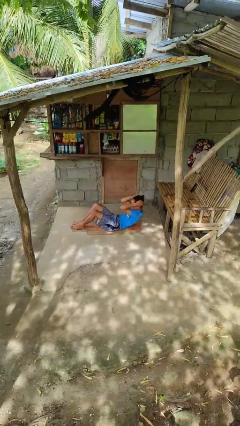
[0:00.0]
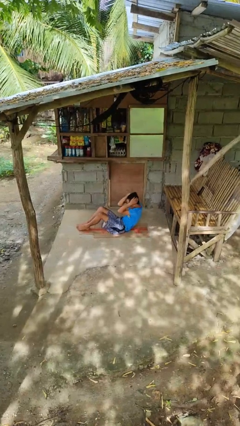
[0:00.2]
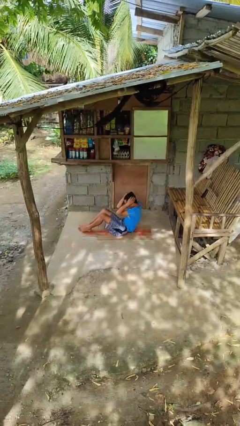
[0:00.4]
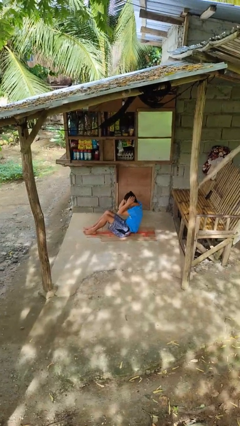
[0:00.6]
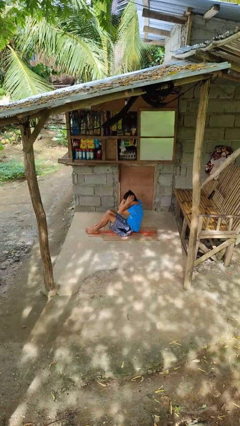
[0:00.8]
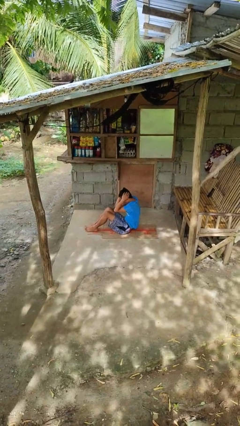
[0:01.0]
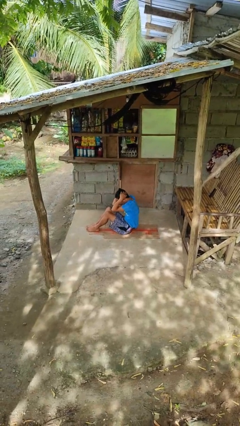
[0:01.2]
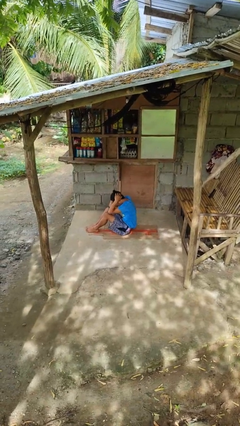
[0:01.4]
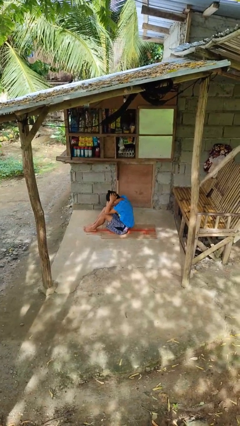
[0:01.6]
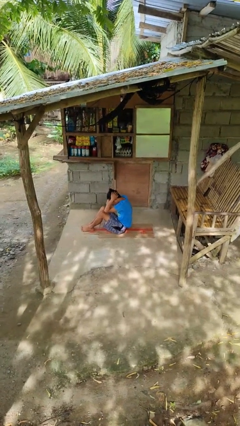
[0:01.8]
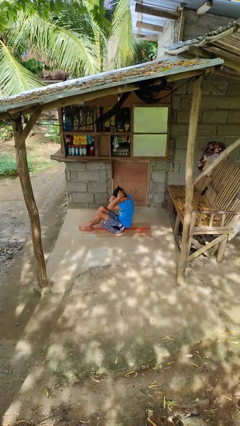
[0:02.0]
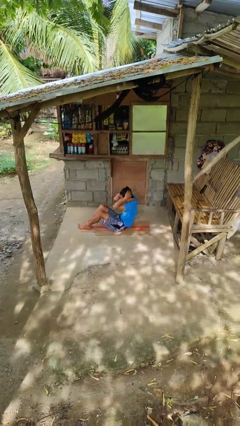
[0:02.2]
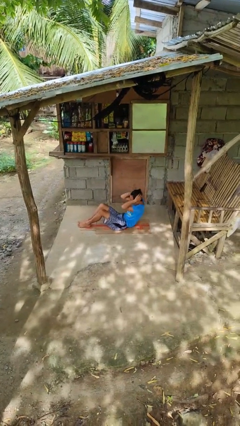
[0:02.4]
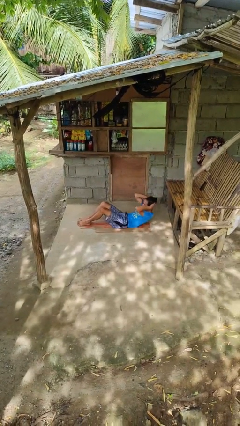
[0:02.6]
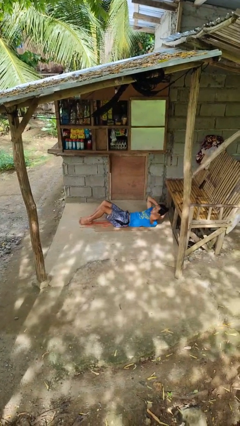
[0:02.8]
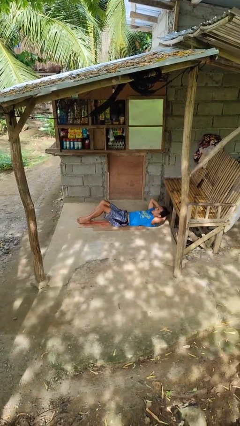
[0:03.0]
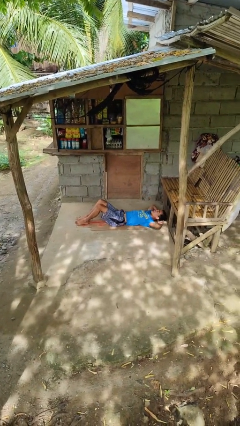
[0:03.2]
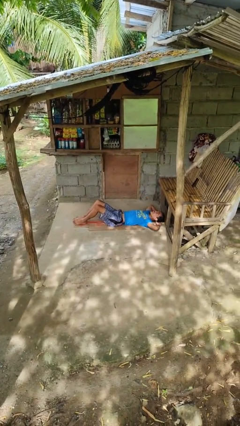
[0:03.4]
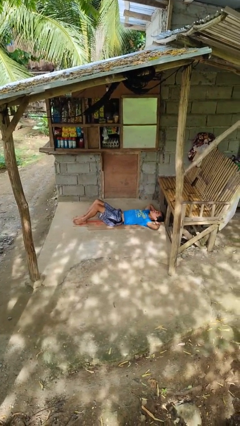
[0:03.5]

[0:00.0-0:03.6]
person exercises with situp

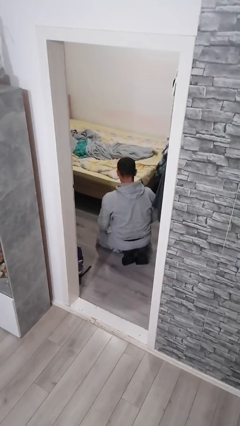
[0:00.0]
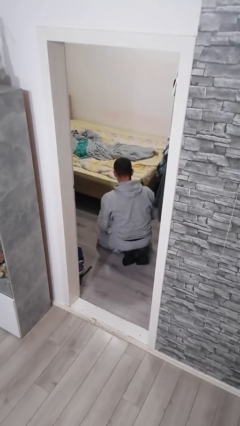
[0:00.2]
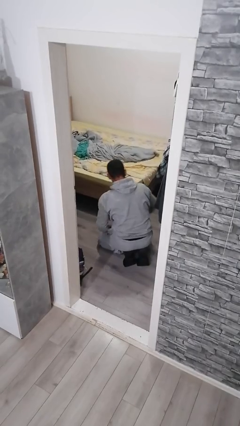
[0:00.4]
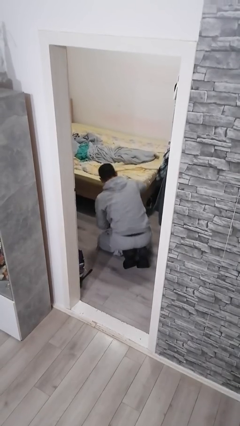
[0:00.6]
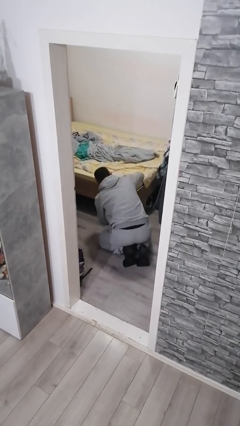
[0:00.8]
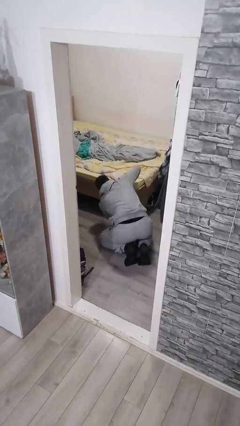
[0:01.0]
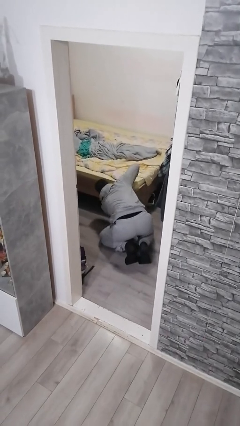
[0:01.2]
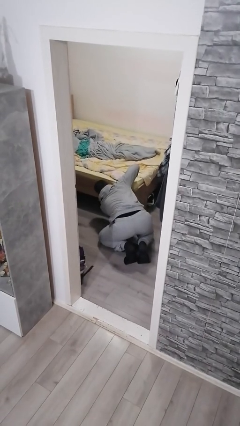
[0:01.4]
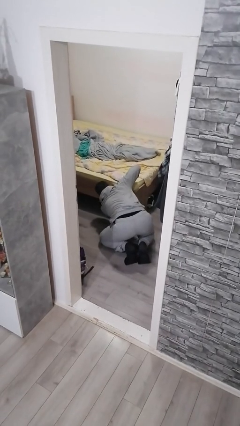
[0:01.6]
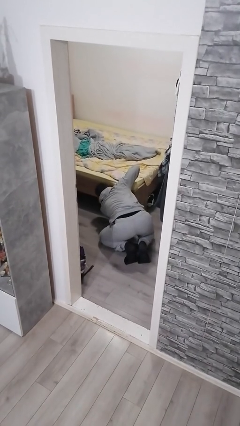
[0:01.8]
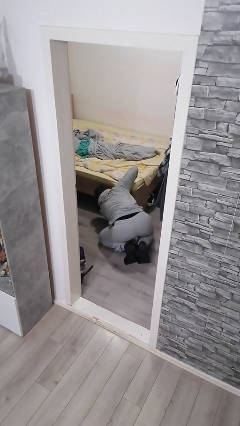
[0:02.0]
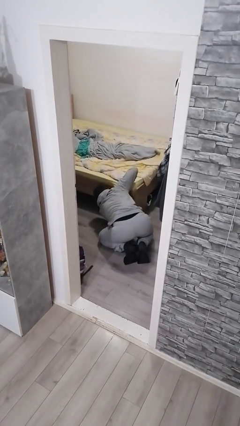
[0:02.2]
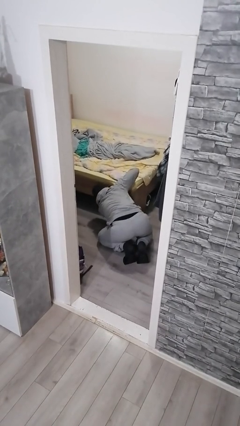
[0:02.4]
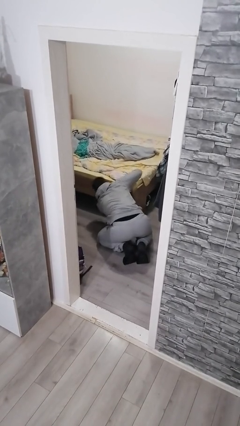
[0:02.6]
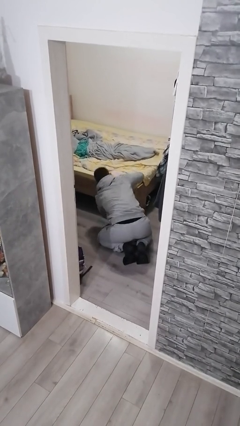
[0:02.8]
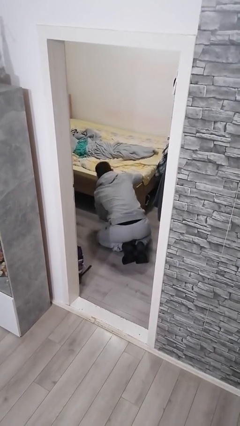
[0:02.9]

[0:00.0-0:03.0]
person searches under bed

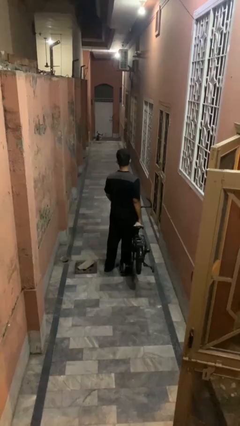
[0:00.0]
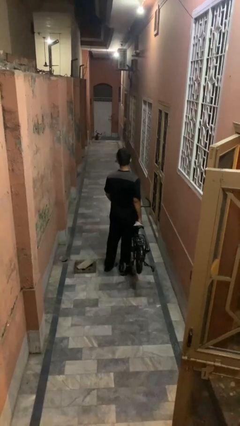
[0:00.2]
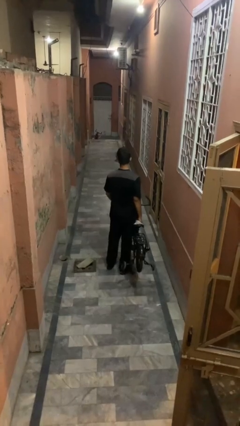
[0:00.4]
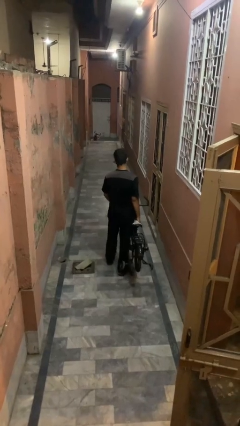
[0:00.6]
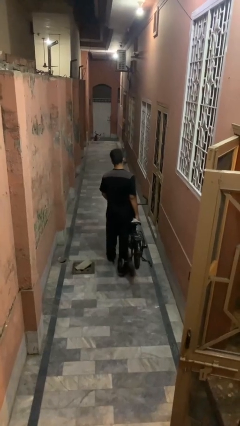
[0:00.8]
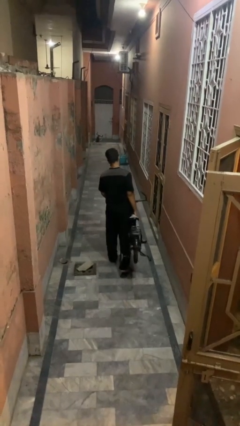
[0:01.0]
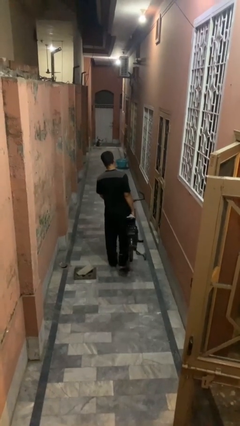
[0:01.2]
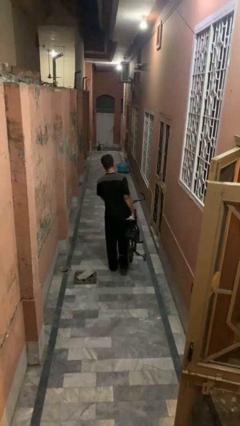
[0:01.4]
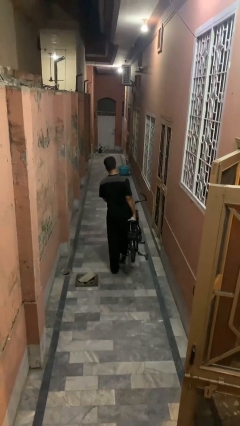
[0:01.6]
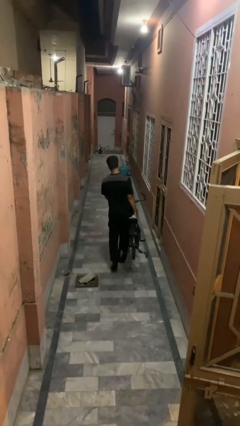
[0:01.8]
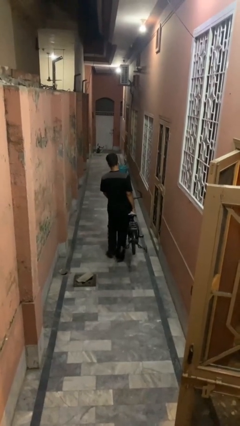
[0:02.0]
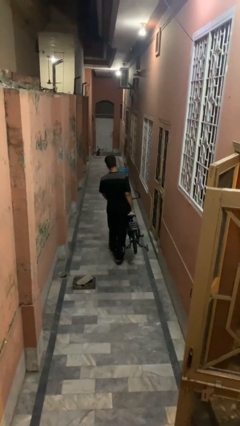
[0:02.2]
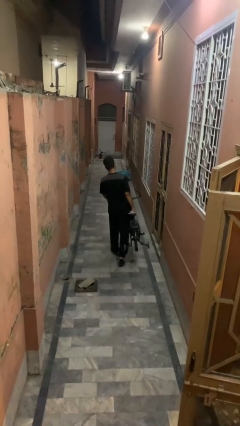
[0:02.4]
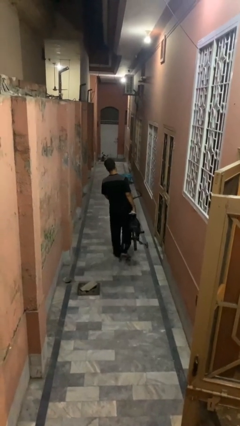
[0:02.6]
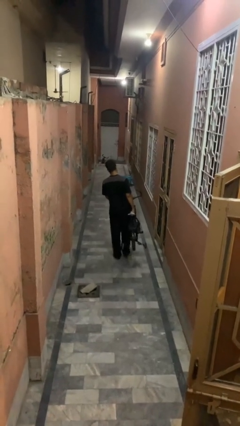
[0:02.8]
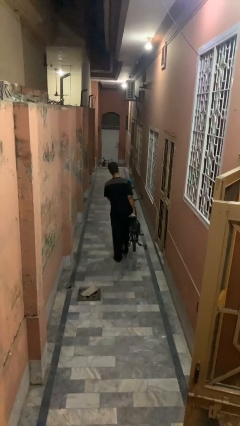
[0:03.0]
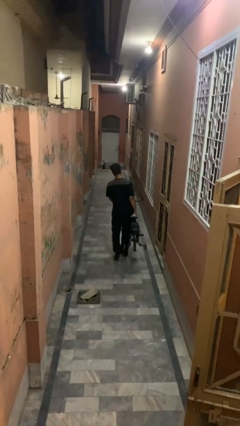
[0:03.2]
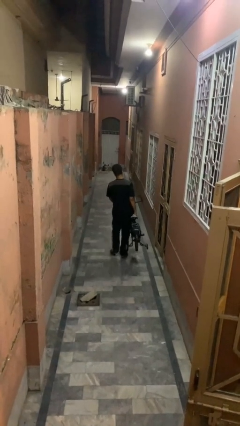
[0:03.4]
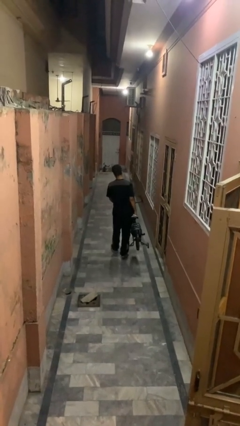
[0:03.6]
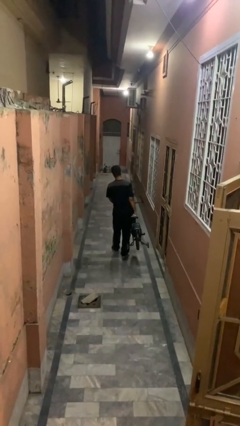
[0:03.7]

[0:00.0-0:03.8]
person carries bicycle

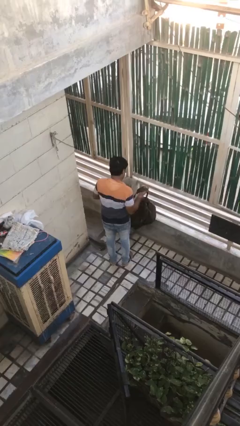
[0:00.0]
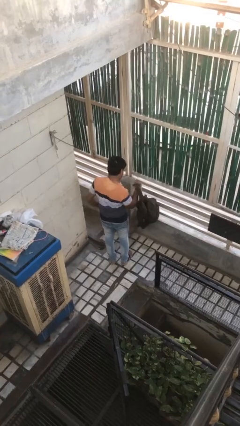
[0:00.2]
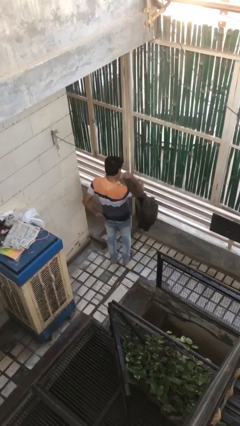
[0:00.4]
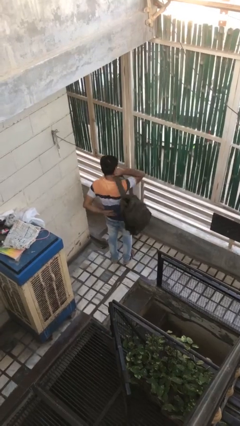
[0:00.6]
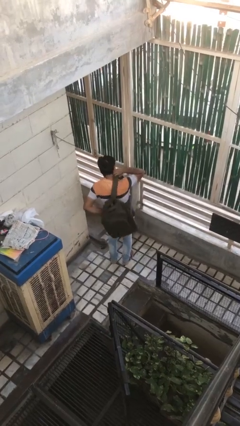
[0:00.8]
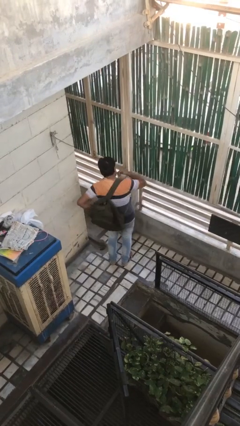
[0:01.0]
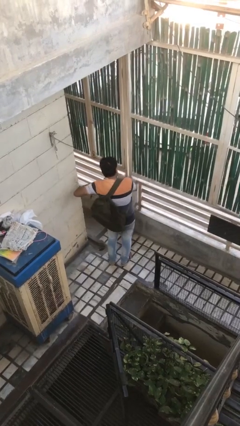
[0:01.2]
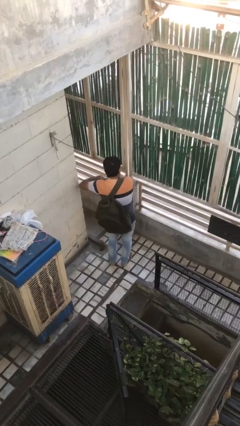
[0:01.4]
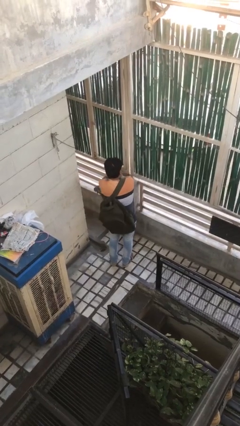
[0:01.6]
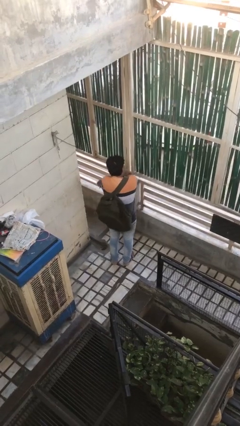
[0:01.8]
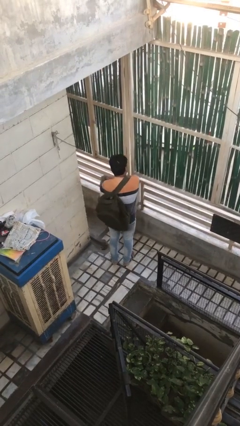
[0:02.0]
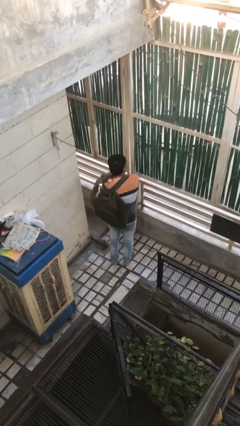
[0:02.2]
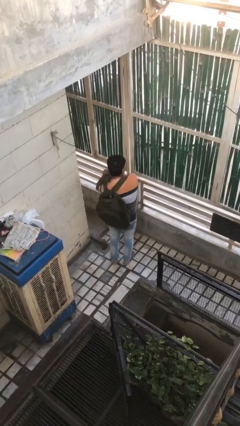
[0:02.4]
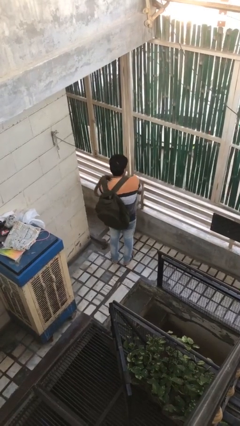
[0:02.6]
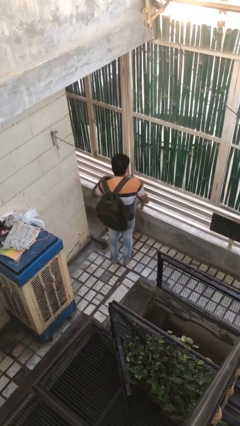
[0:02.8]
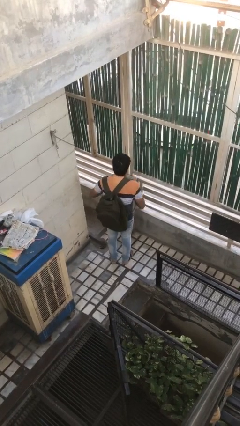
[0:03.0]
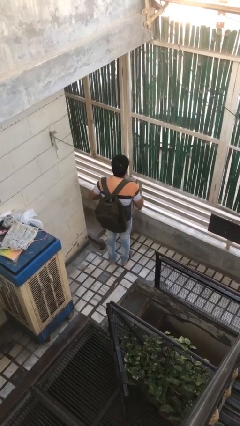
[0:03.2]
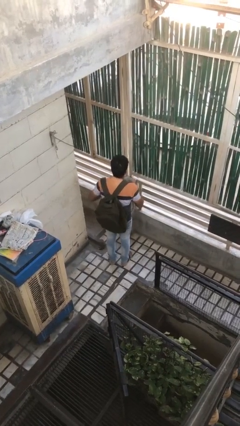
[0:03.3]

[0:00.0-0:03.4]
person puts on backpack

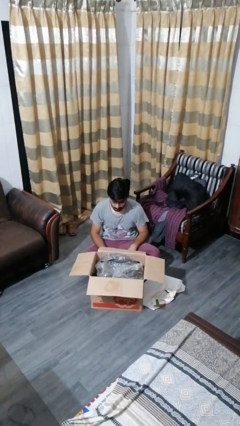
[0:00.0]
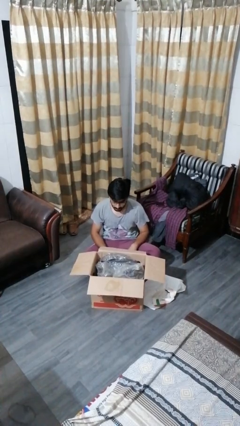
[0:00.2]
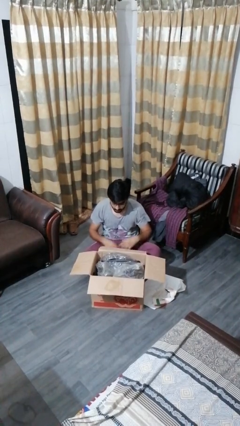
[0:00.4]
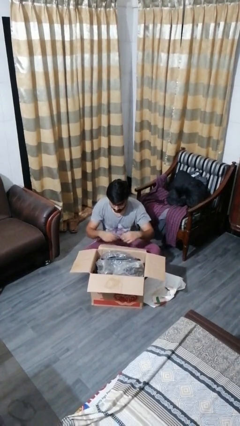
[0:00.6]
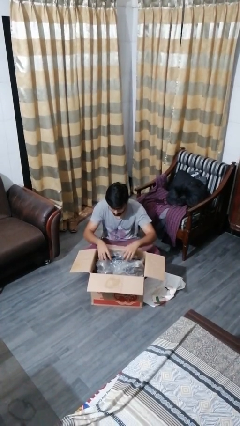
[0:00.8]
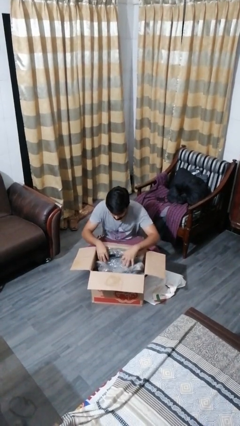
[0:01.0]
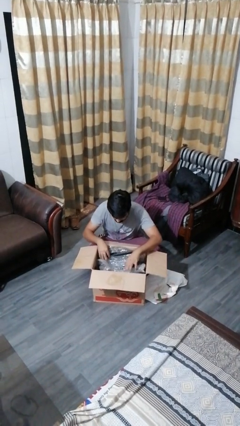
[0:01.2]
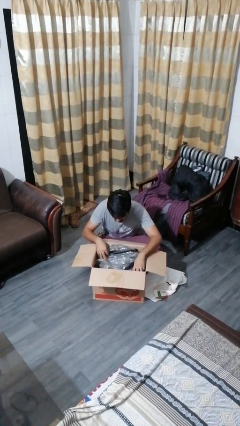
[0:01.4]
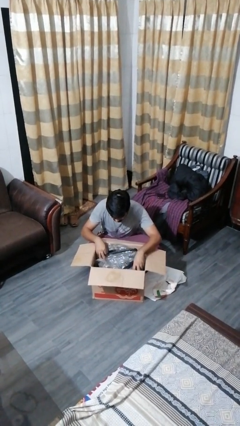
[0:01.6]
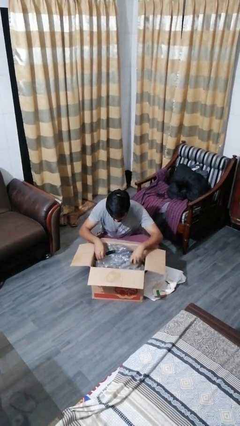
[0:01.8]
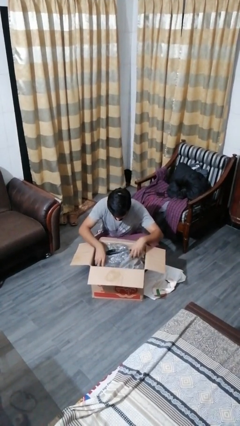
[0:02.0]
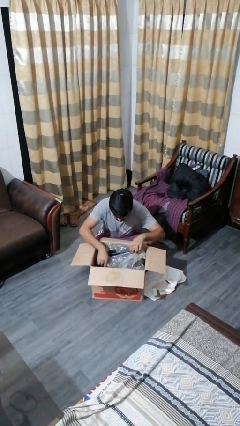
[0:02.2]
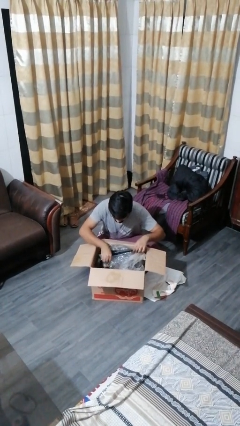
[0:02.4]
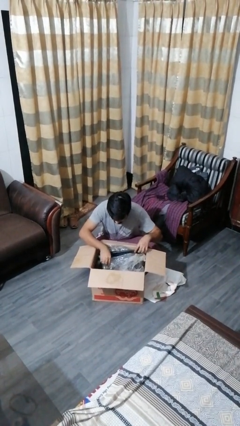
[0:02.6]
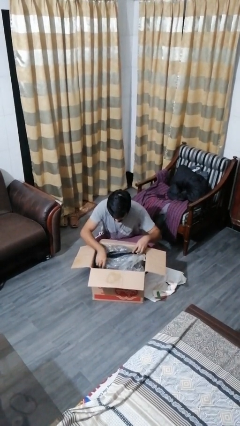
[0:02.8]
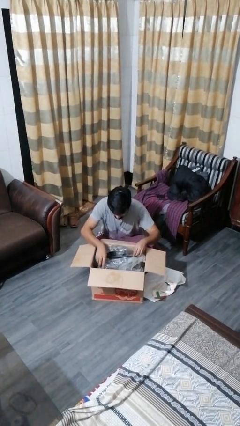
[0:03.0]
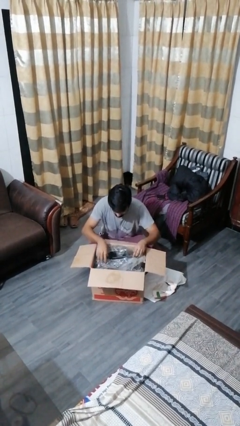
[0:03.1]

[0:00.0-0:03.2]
person searches in box

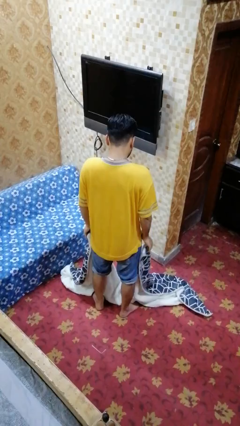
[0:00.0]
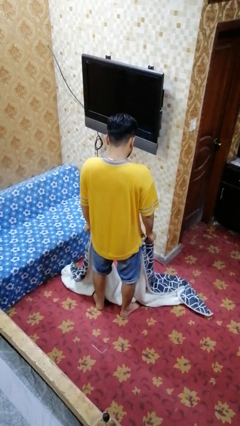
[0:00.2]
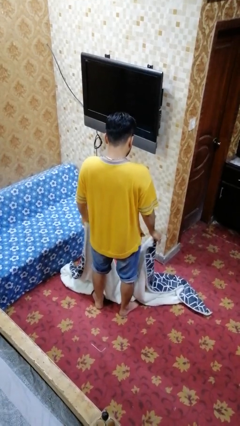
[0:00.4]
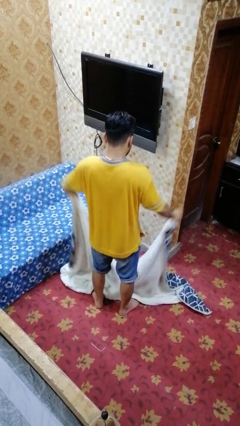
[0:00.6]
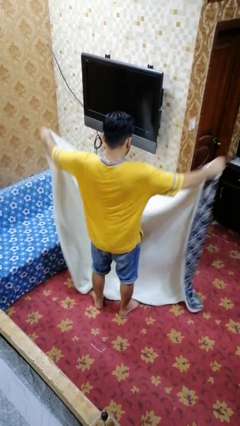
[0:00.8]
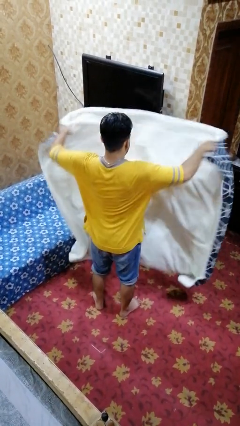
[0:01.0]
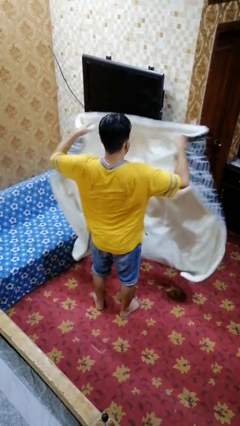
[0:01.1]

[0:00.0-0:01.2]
person folds blanket
